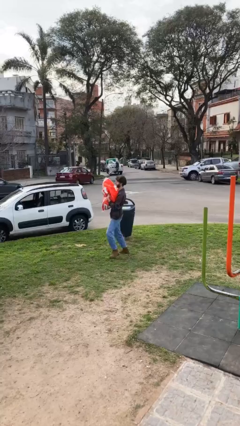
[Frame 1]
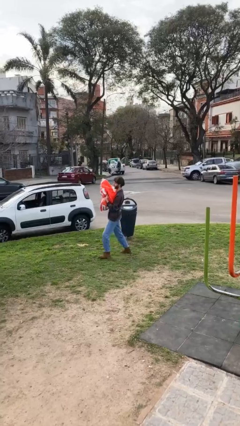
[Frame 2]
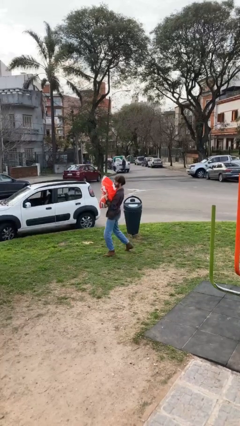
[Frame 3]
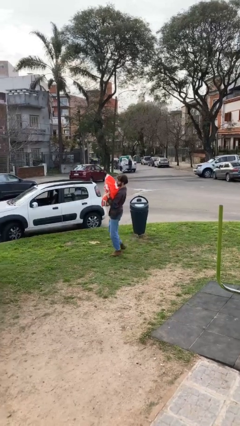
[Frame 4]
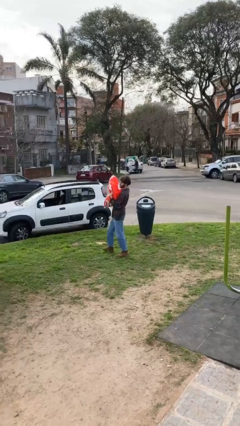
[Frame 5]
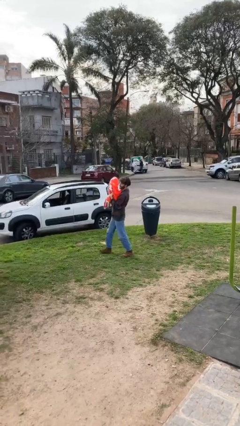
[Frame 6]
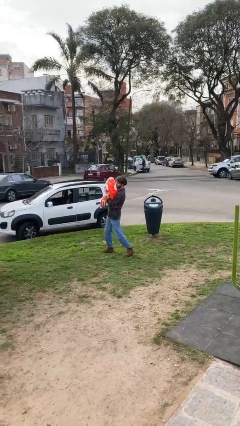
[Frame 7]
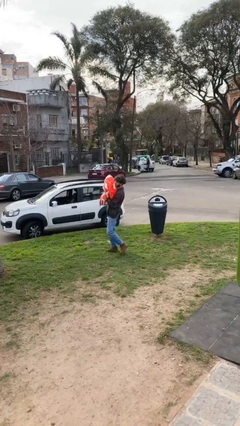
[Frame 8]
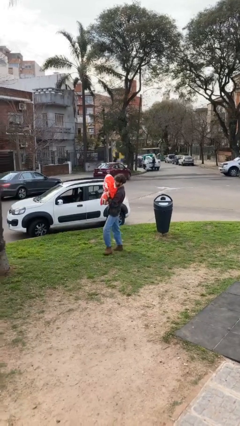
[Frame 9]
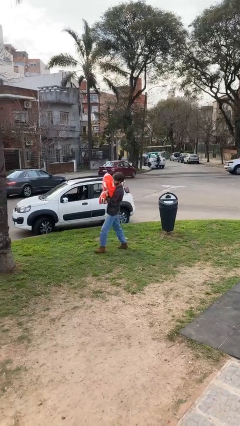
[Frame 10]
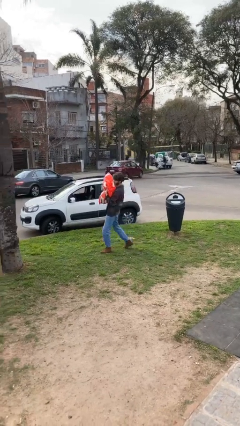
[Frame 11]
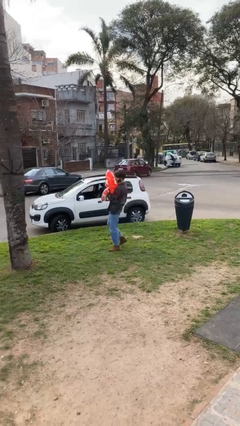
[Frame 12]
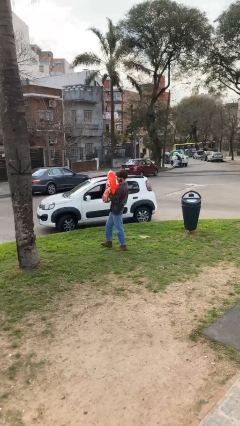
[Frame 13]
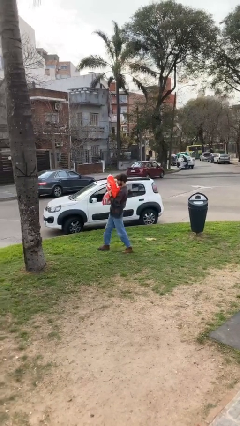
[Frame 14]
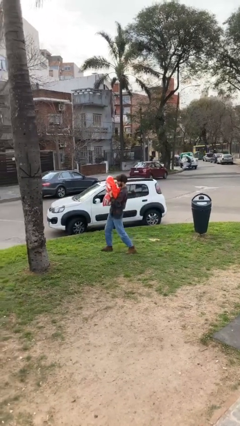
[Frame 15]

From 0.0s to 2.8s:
person carries heavy object

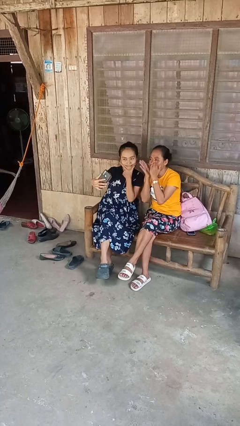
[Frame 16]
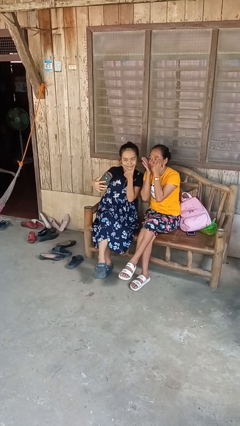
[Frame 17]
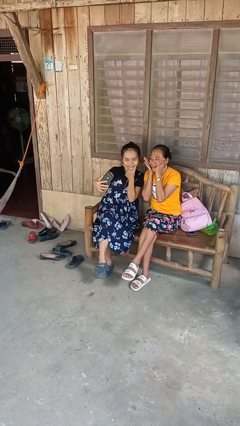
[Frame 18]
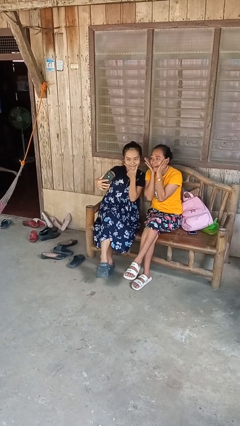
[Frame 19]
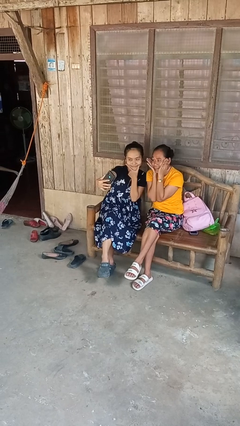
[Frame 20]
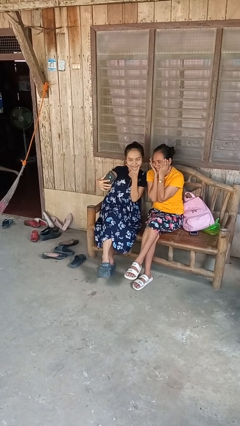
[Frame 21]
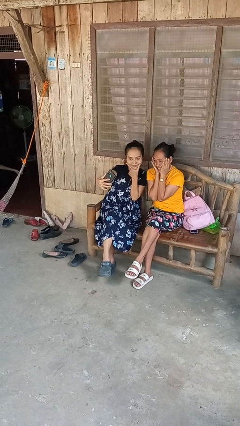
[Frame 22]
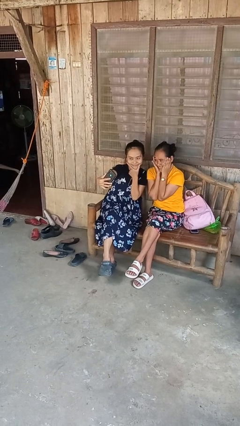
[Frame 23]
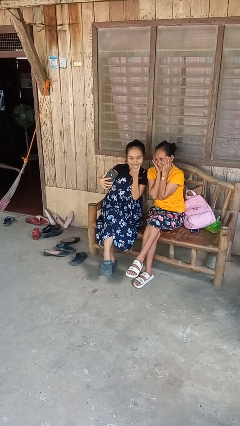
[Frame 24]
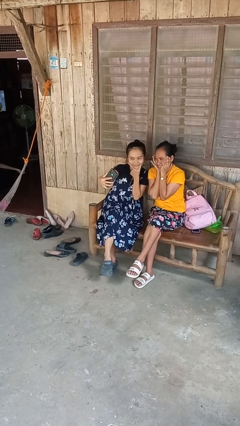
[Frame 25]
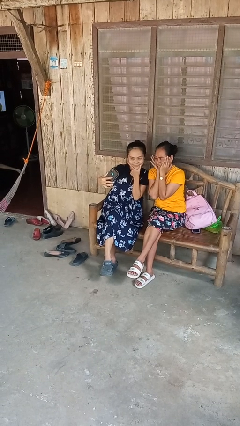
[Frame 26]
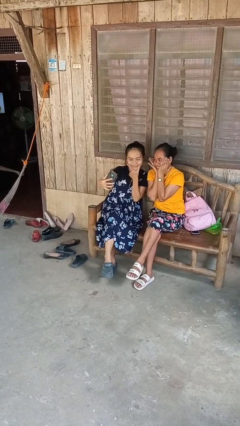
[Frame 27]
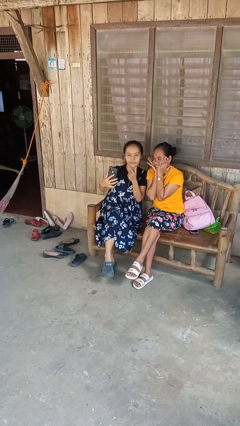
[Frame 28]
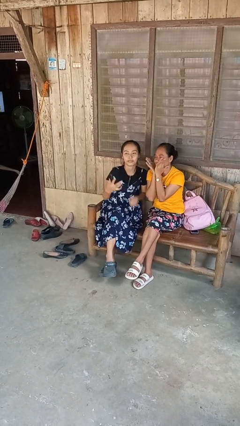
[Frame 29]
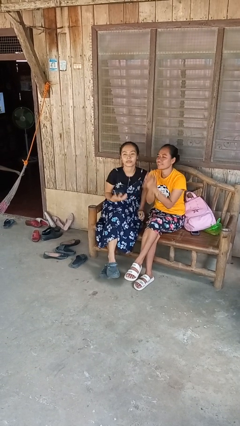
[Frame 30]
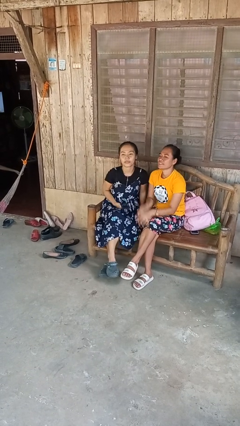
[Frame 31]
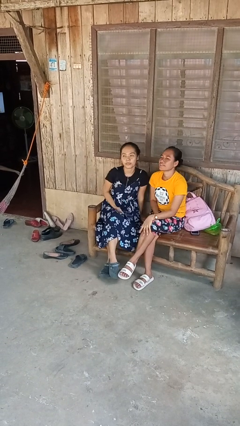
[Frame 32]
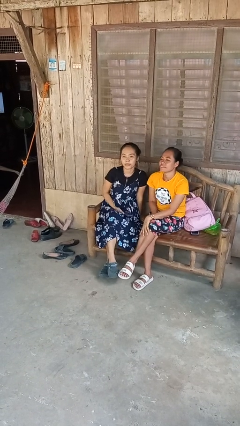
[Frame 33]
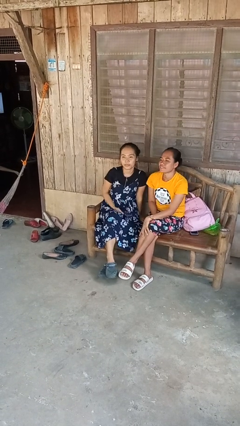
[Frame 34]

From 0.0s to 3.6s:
person takes selfie with person

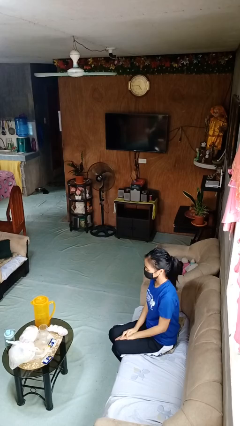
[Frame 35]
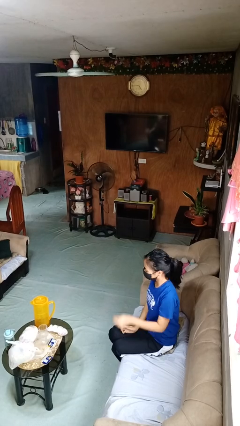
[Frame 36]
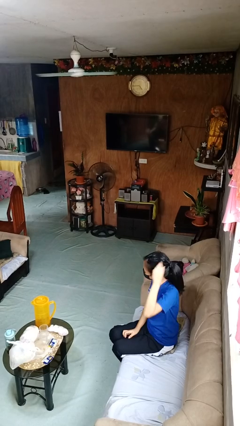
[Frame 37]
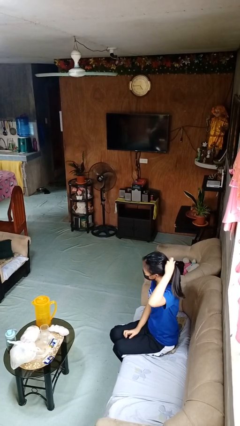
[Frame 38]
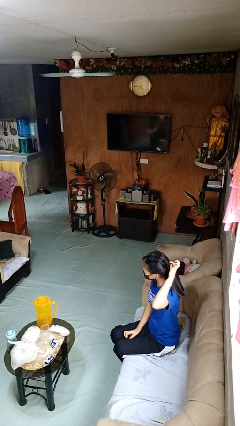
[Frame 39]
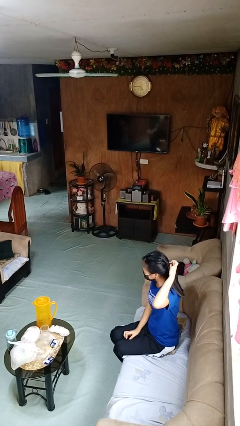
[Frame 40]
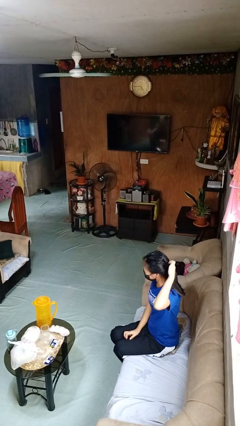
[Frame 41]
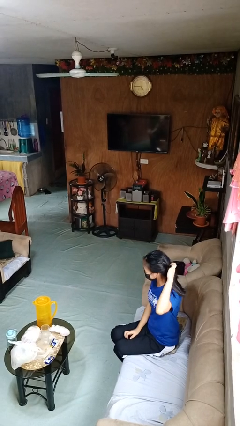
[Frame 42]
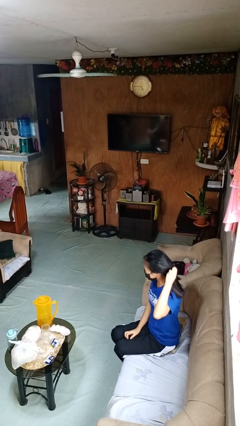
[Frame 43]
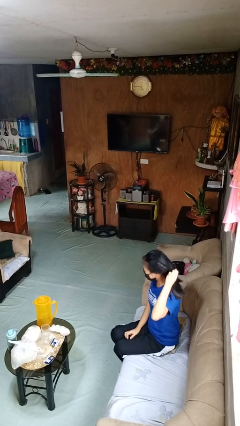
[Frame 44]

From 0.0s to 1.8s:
person takes off hairtie

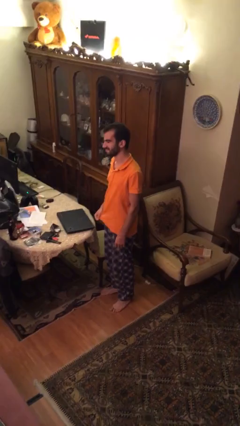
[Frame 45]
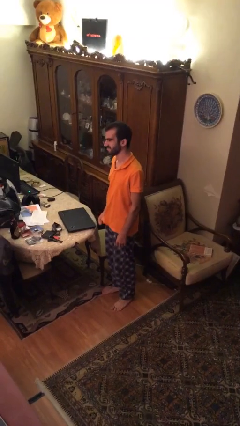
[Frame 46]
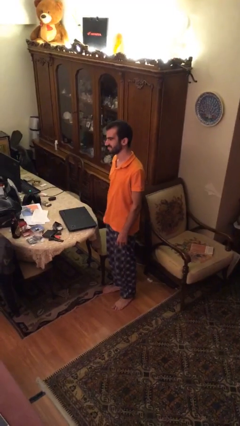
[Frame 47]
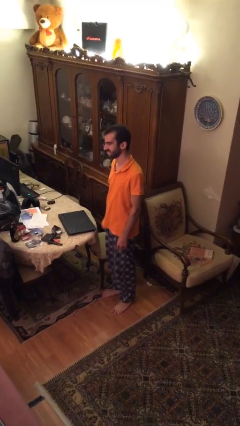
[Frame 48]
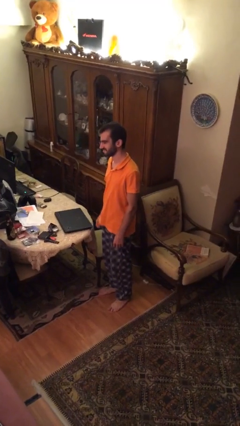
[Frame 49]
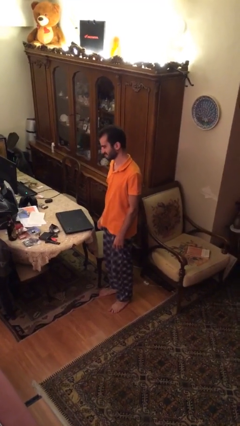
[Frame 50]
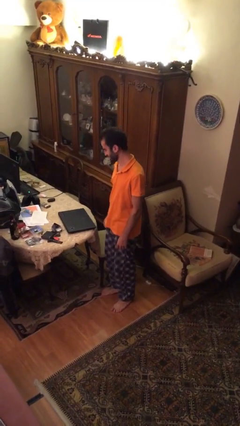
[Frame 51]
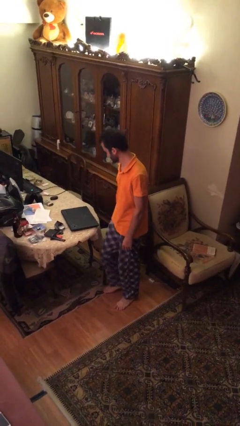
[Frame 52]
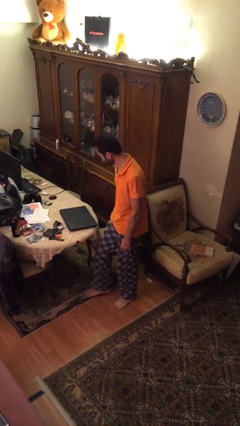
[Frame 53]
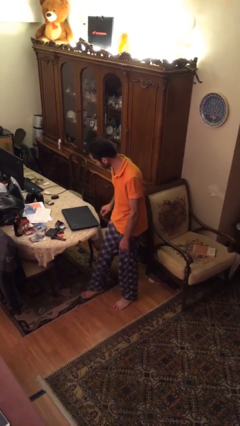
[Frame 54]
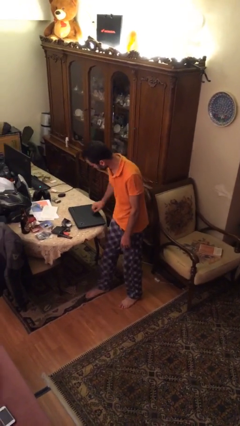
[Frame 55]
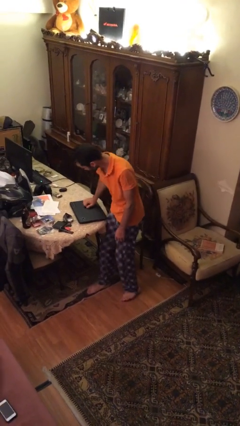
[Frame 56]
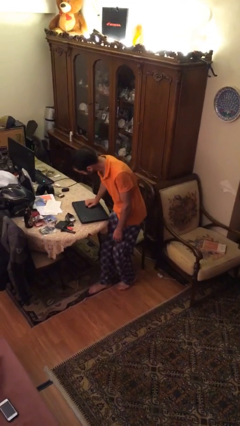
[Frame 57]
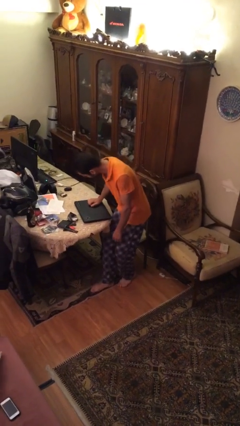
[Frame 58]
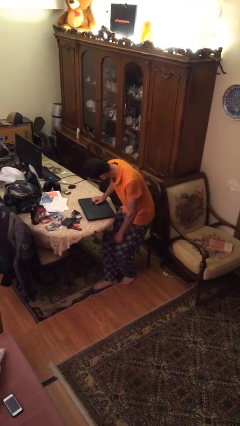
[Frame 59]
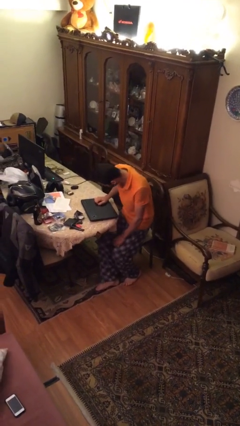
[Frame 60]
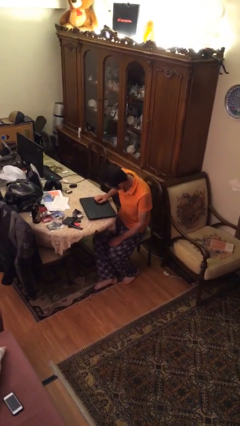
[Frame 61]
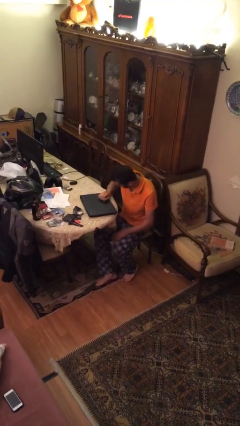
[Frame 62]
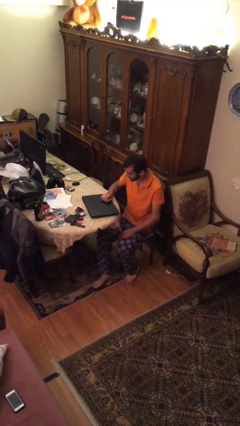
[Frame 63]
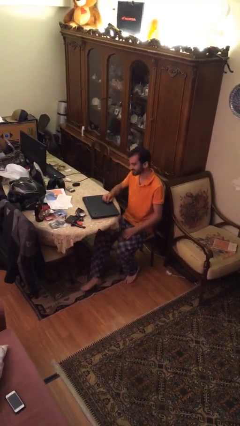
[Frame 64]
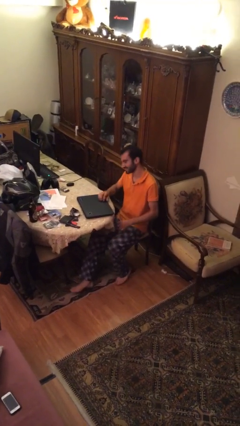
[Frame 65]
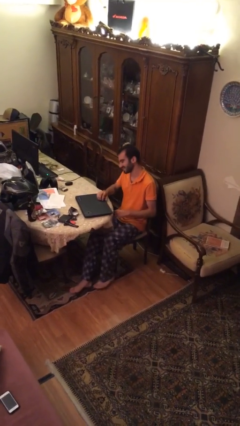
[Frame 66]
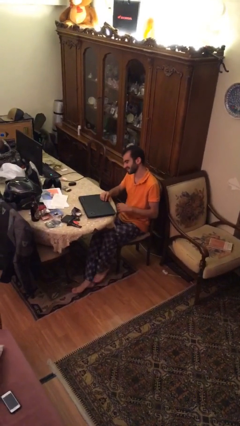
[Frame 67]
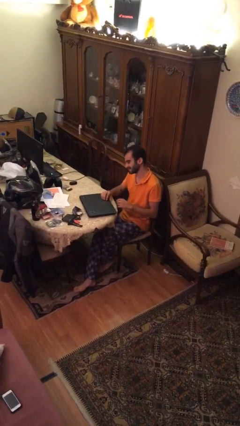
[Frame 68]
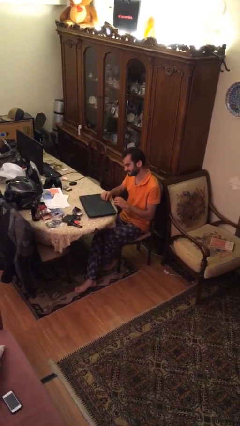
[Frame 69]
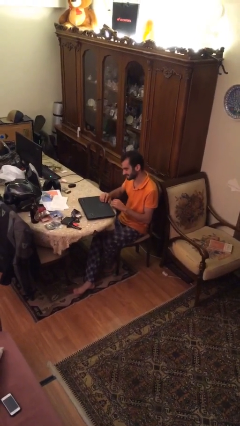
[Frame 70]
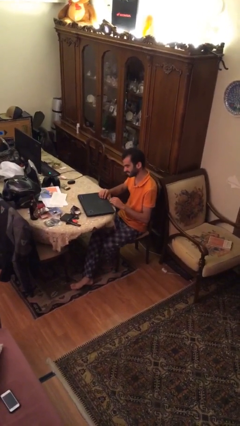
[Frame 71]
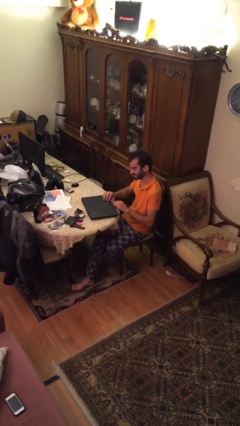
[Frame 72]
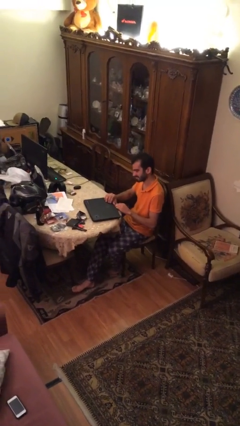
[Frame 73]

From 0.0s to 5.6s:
person sits down

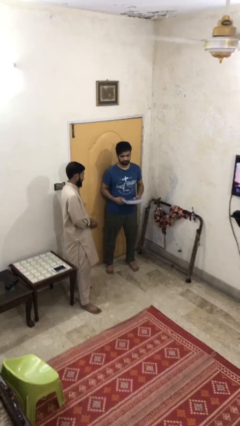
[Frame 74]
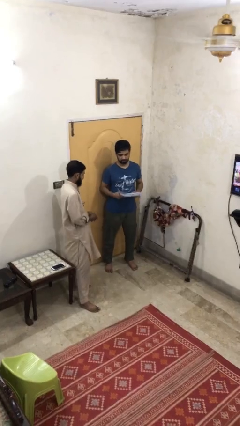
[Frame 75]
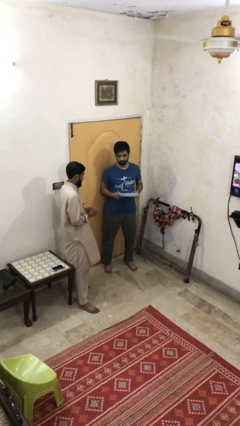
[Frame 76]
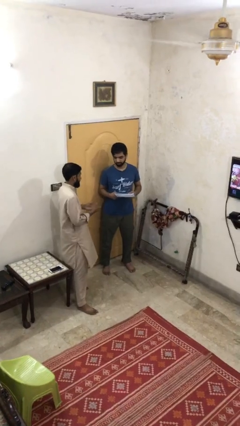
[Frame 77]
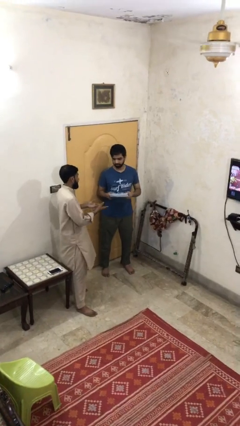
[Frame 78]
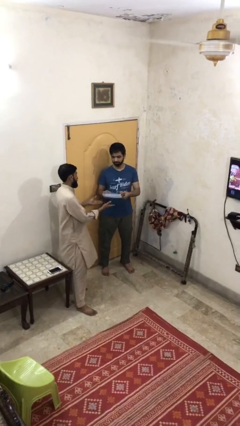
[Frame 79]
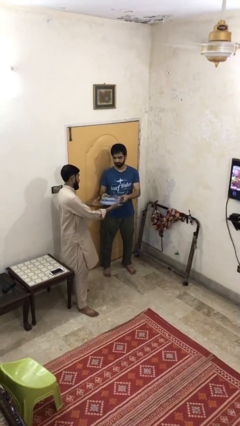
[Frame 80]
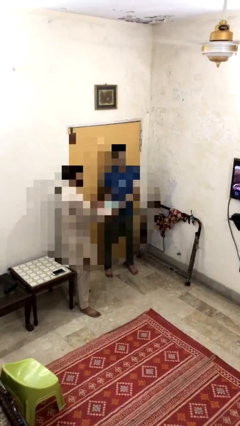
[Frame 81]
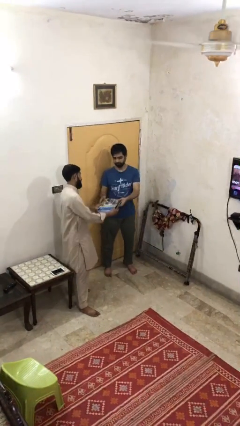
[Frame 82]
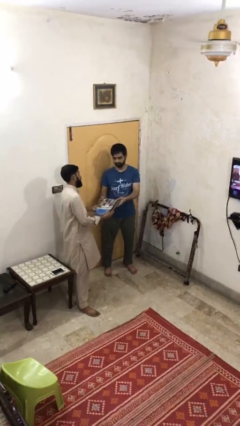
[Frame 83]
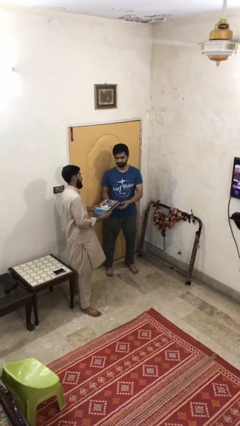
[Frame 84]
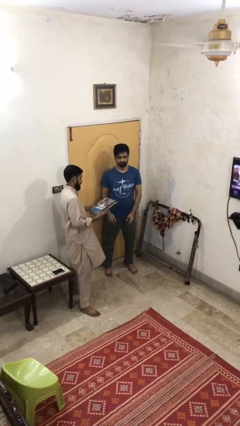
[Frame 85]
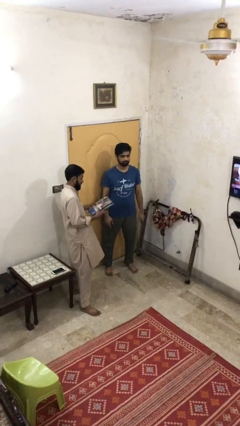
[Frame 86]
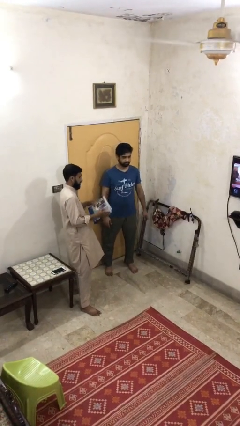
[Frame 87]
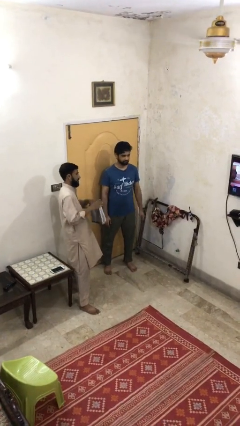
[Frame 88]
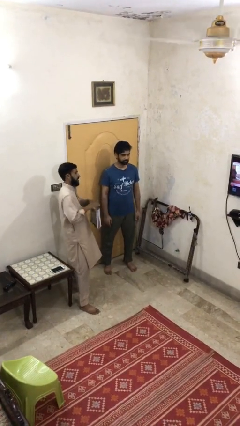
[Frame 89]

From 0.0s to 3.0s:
person transfers object to person
